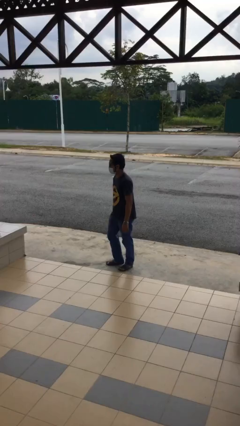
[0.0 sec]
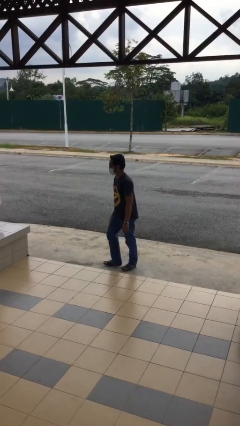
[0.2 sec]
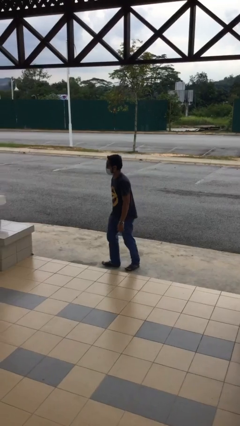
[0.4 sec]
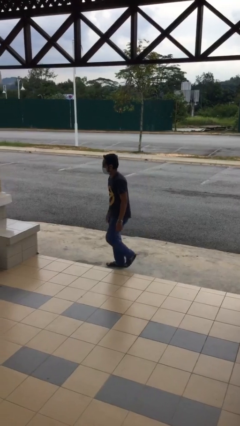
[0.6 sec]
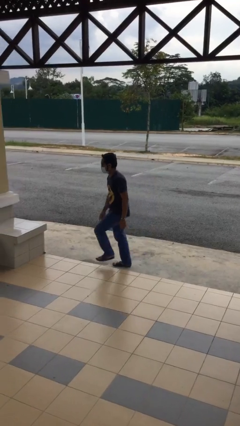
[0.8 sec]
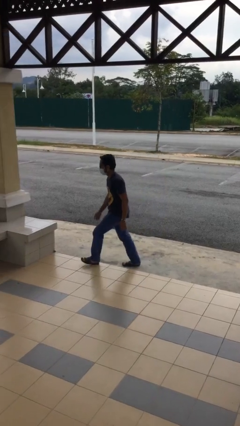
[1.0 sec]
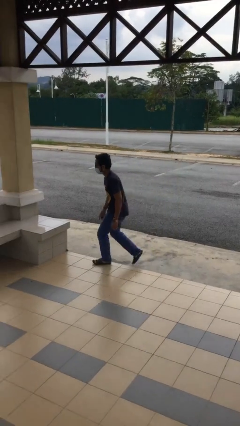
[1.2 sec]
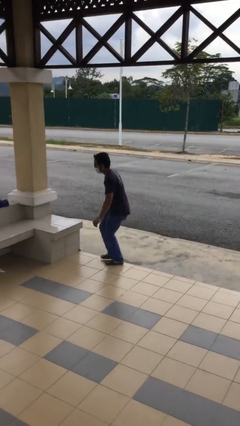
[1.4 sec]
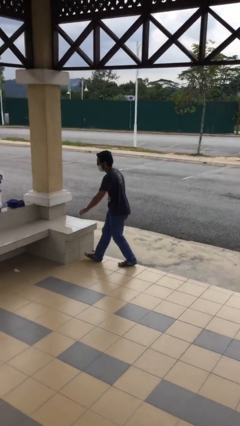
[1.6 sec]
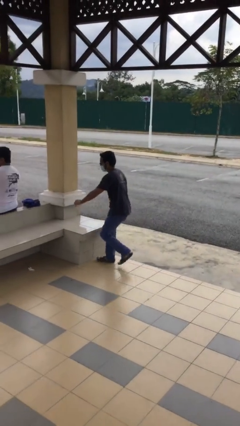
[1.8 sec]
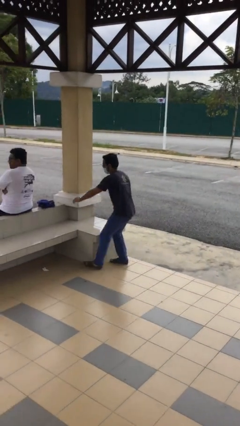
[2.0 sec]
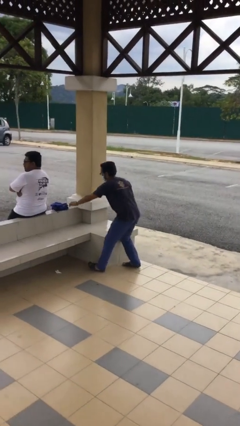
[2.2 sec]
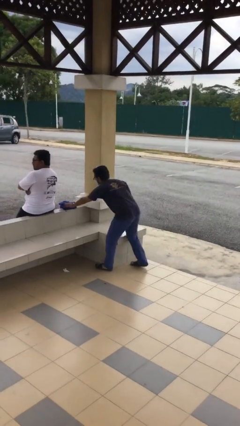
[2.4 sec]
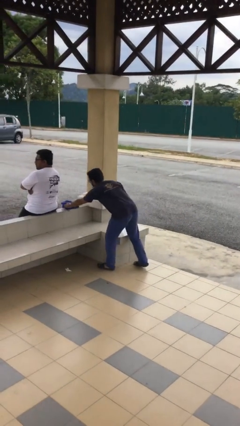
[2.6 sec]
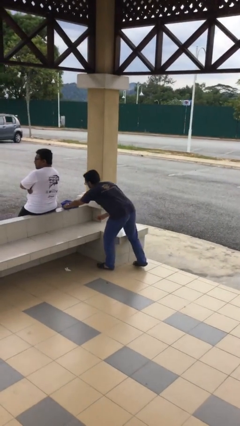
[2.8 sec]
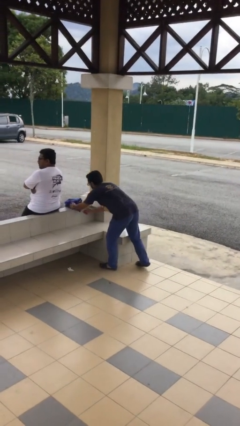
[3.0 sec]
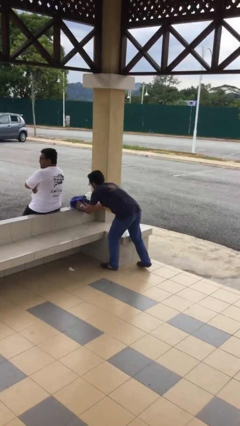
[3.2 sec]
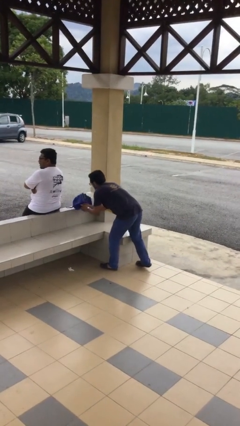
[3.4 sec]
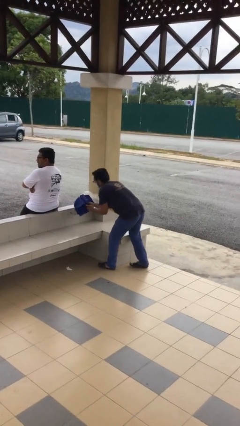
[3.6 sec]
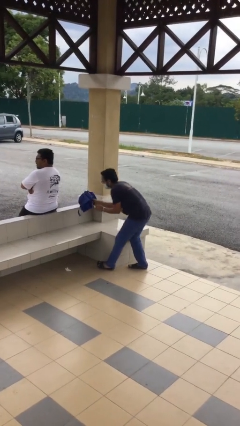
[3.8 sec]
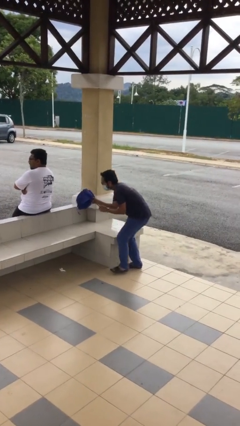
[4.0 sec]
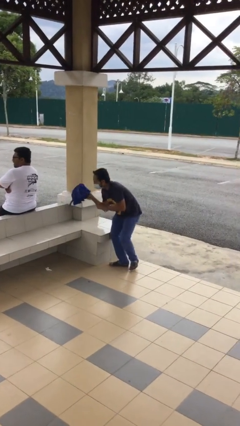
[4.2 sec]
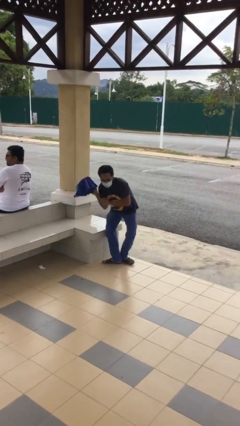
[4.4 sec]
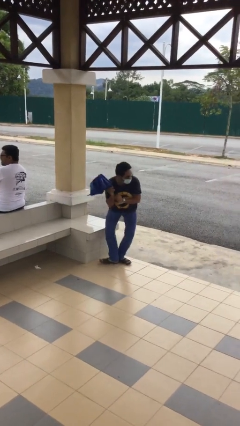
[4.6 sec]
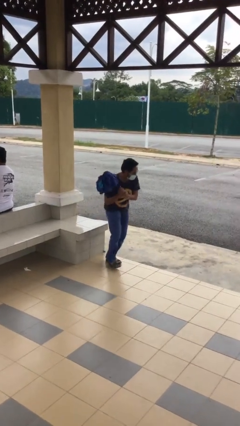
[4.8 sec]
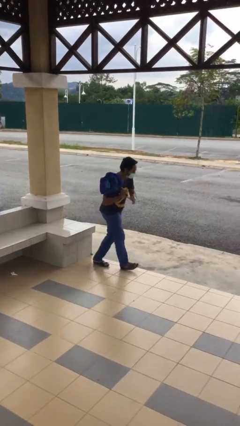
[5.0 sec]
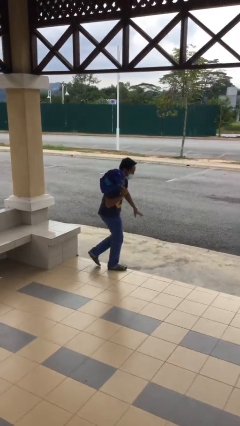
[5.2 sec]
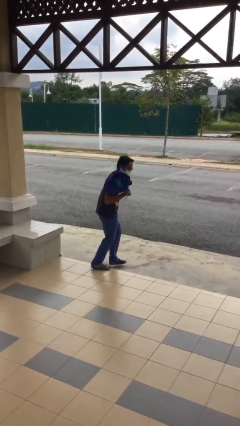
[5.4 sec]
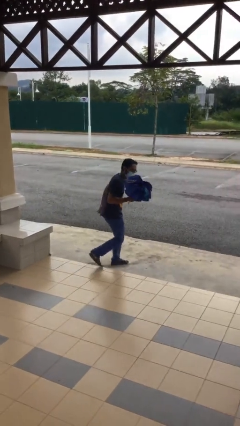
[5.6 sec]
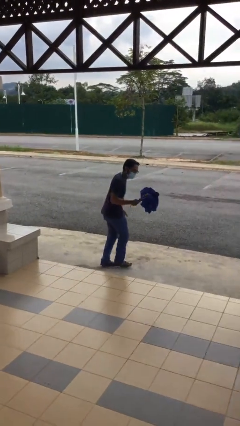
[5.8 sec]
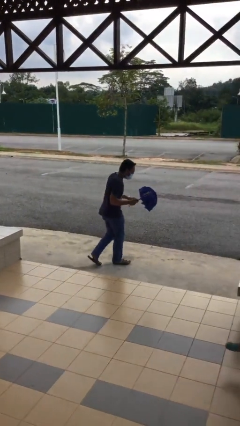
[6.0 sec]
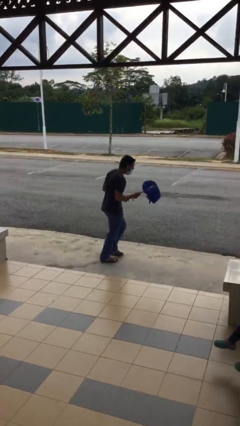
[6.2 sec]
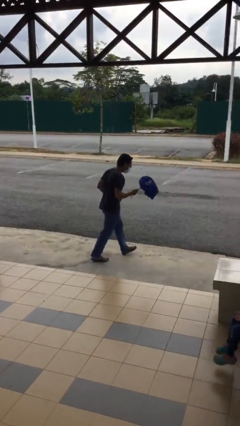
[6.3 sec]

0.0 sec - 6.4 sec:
person steals object from person

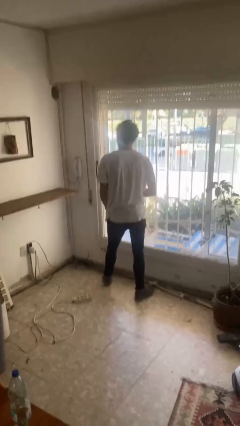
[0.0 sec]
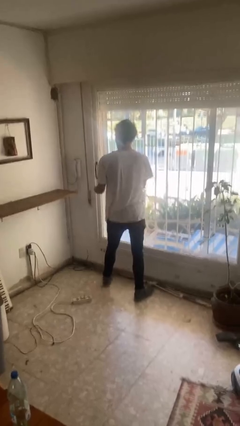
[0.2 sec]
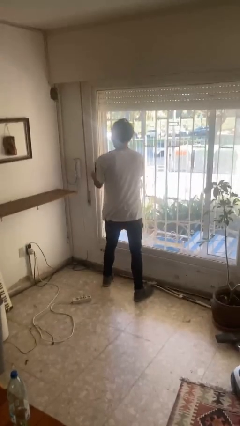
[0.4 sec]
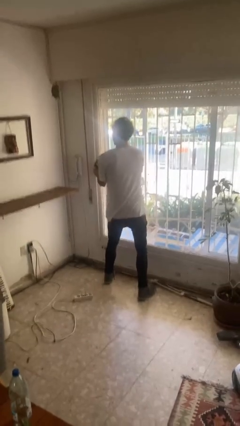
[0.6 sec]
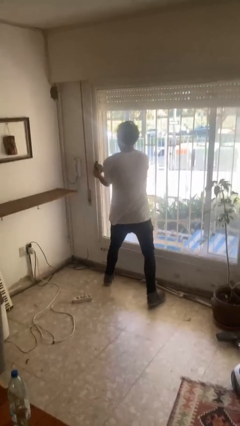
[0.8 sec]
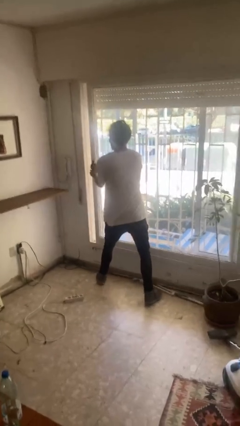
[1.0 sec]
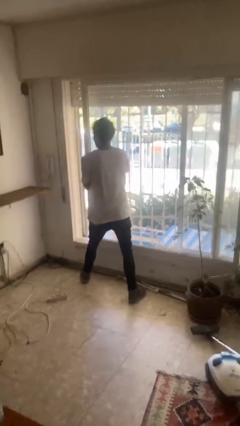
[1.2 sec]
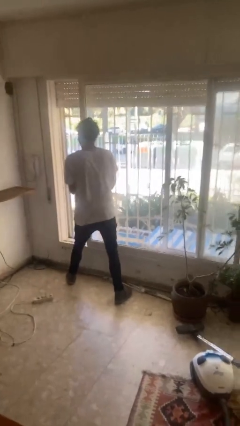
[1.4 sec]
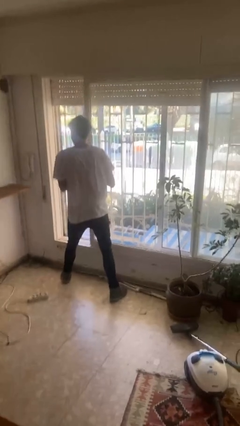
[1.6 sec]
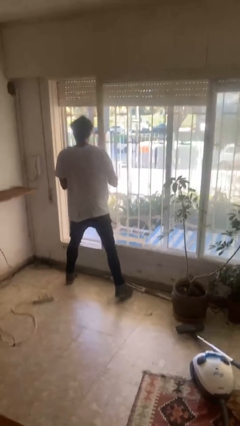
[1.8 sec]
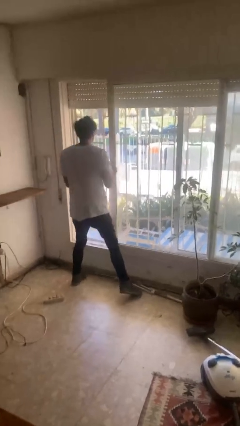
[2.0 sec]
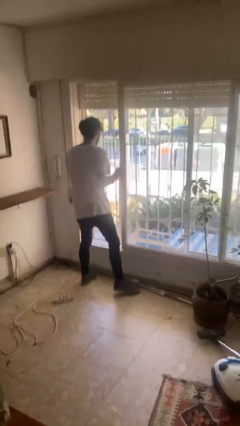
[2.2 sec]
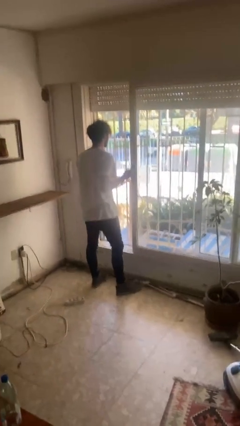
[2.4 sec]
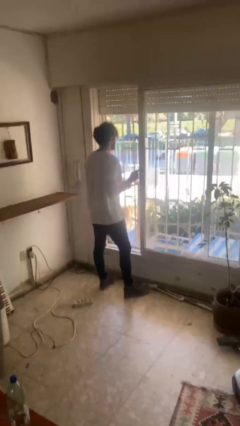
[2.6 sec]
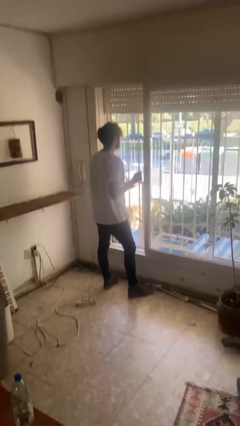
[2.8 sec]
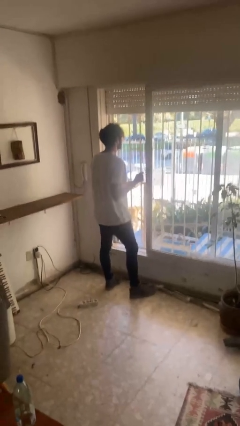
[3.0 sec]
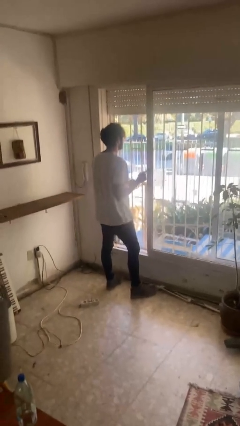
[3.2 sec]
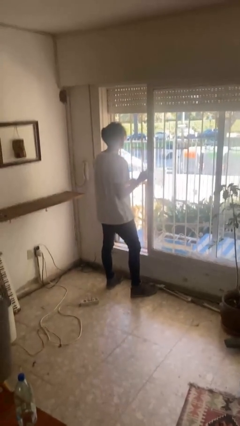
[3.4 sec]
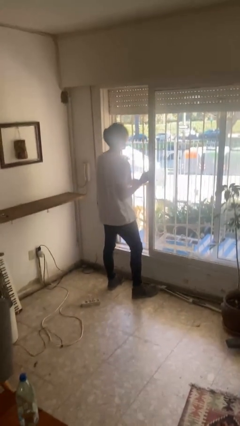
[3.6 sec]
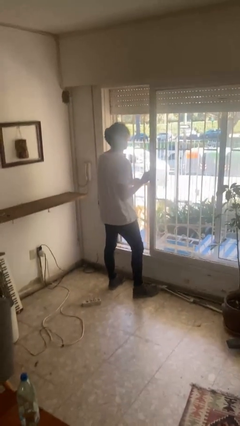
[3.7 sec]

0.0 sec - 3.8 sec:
person opens sliding door

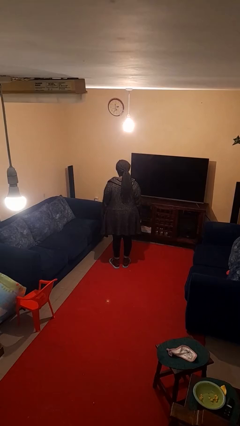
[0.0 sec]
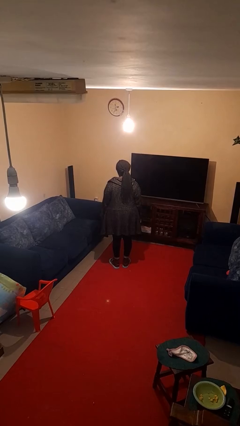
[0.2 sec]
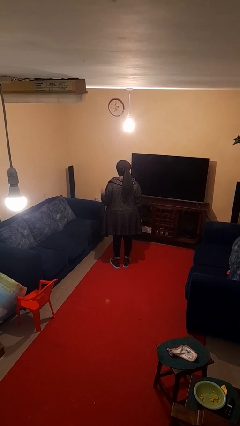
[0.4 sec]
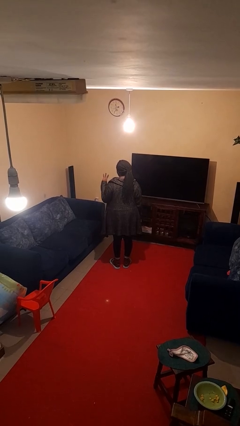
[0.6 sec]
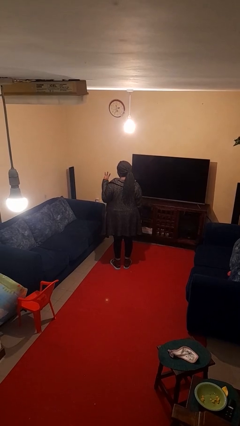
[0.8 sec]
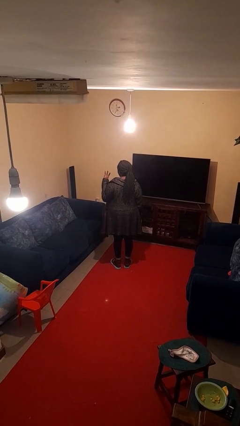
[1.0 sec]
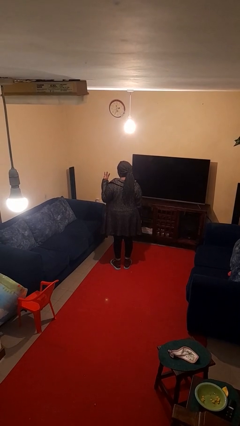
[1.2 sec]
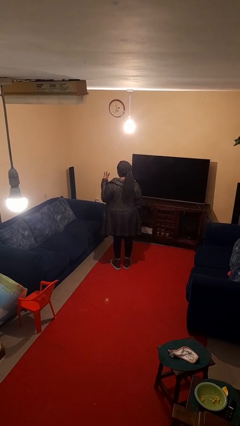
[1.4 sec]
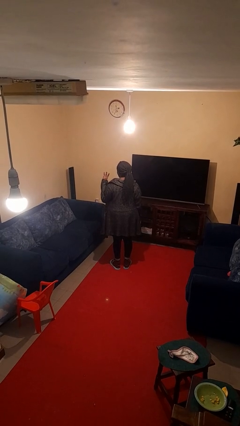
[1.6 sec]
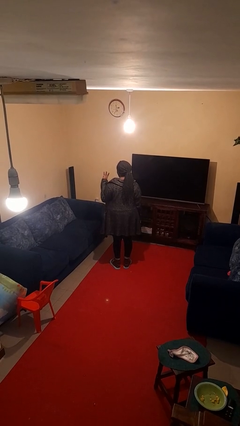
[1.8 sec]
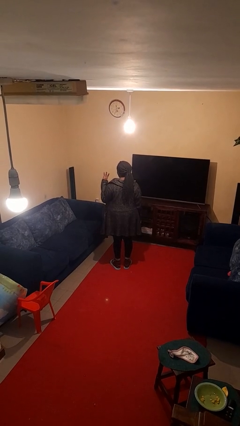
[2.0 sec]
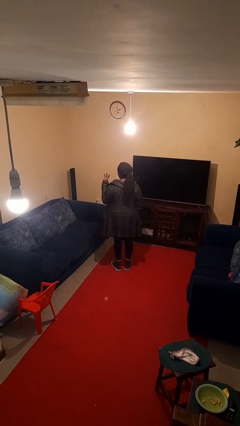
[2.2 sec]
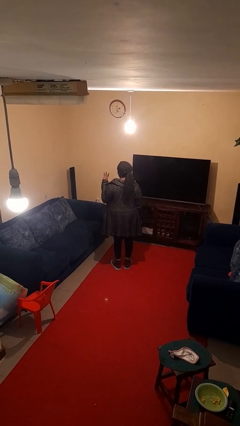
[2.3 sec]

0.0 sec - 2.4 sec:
person gestures number three

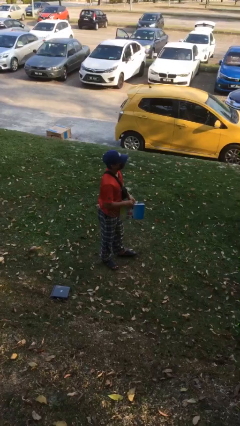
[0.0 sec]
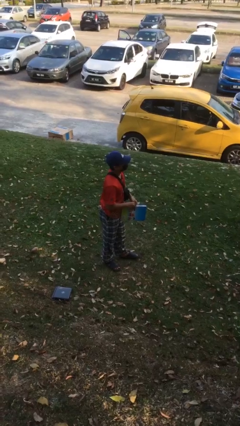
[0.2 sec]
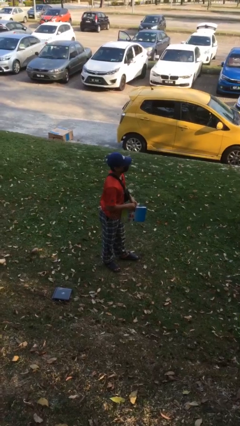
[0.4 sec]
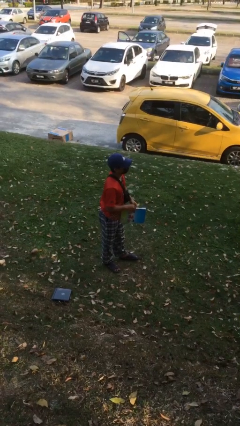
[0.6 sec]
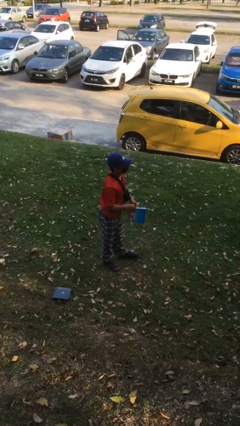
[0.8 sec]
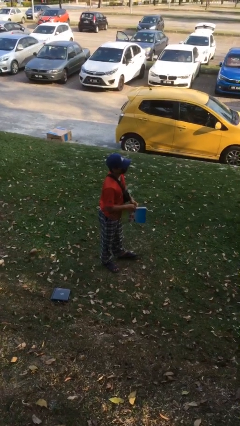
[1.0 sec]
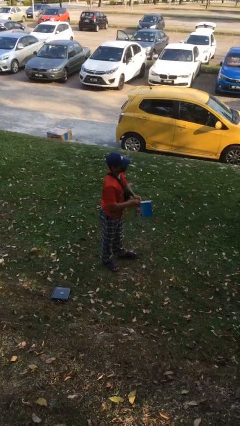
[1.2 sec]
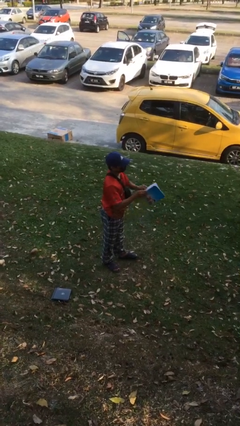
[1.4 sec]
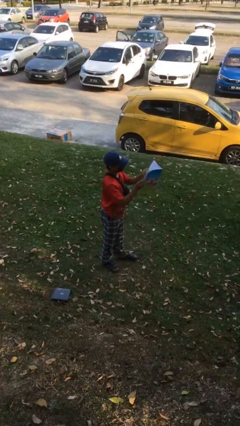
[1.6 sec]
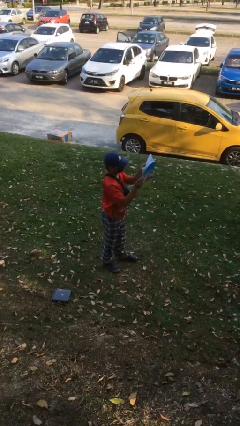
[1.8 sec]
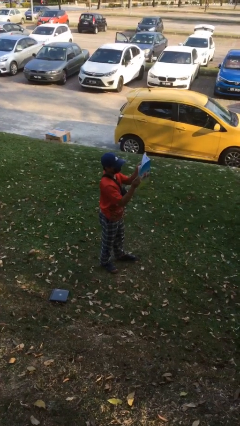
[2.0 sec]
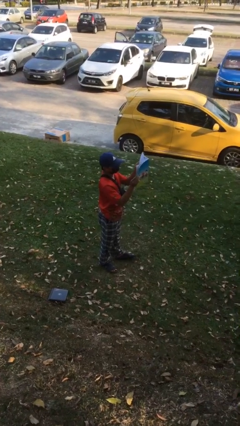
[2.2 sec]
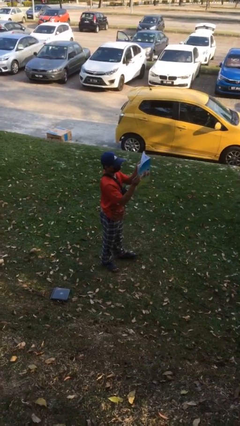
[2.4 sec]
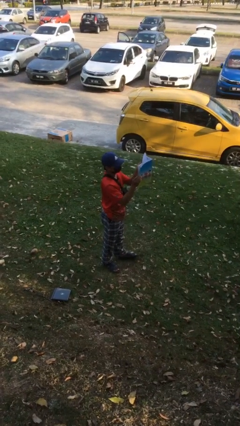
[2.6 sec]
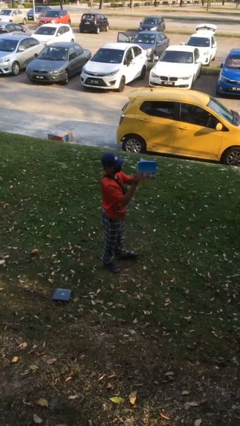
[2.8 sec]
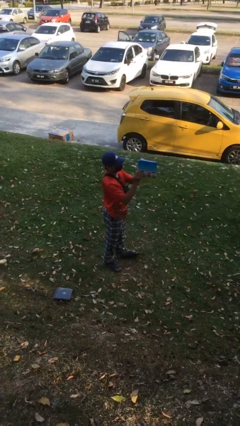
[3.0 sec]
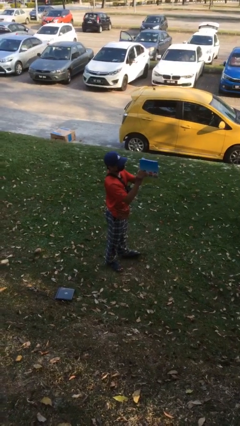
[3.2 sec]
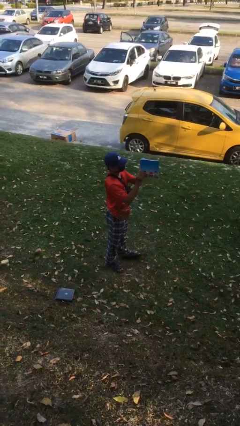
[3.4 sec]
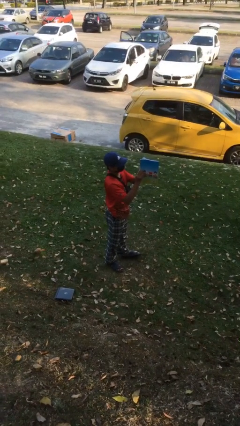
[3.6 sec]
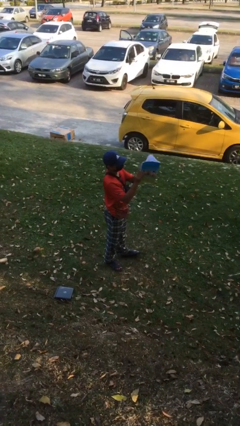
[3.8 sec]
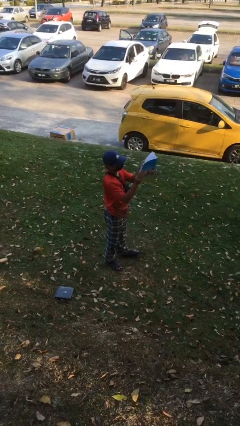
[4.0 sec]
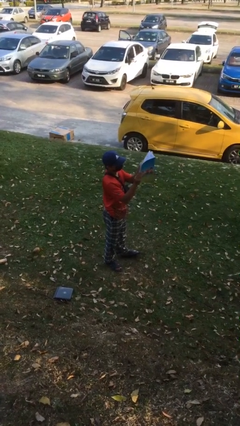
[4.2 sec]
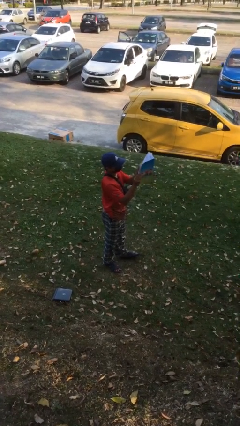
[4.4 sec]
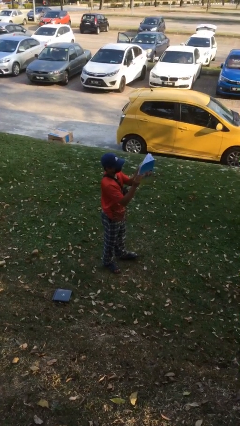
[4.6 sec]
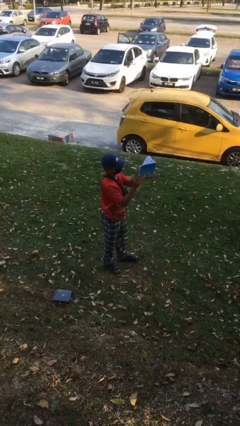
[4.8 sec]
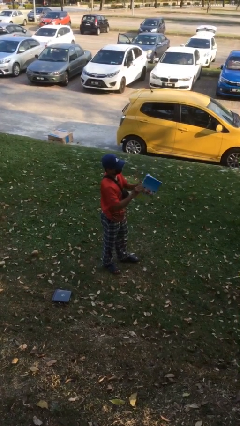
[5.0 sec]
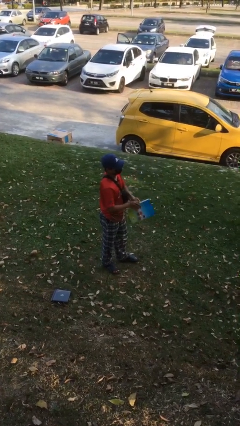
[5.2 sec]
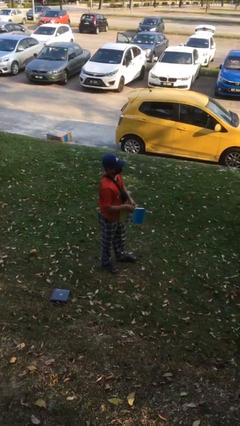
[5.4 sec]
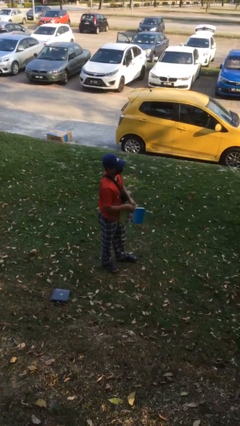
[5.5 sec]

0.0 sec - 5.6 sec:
person reads document
